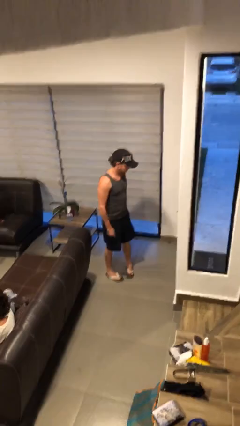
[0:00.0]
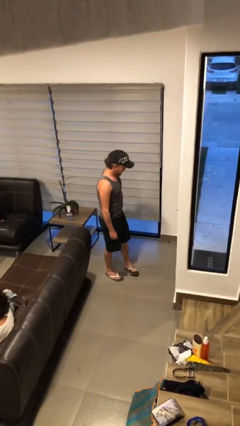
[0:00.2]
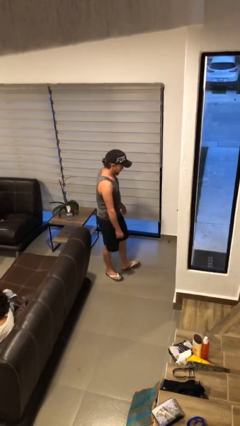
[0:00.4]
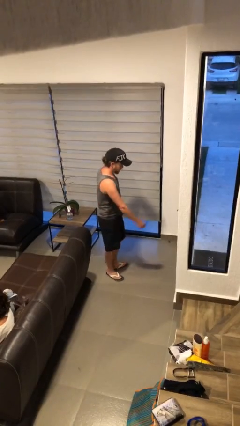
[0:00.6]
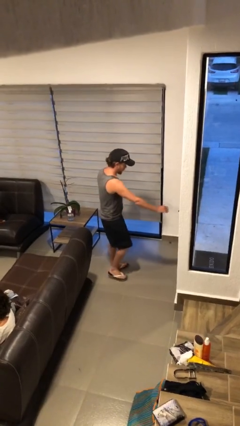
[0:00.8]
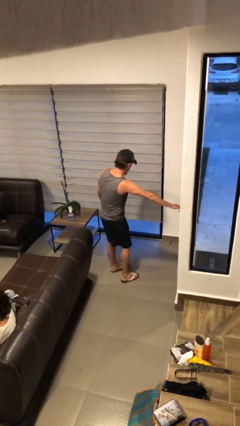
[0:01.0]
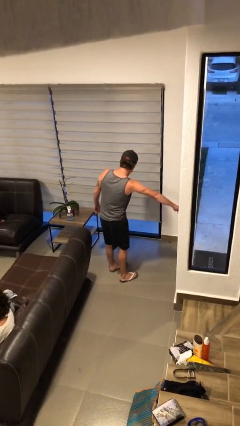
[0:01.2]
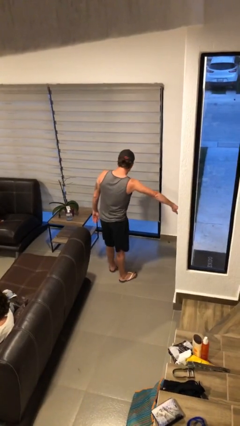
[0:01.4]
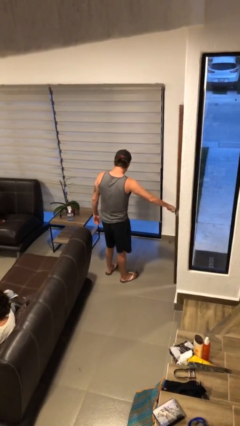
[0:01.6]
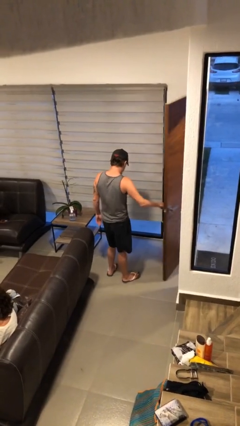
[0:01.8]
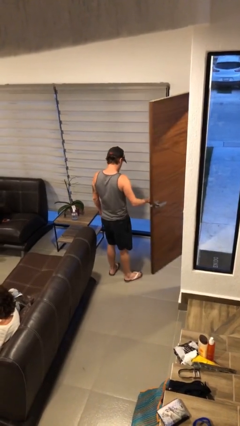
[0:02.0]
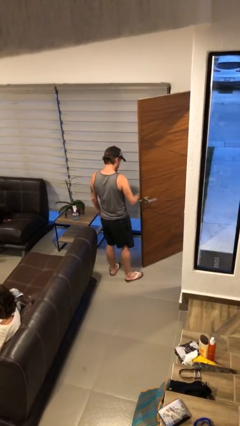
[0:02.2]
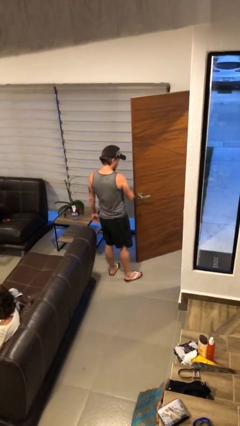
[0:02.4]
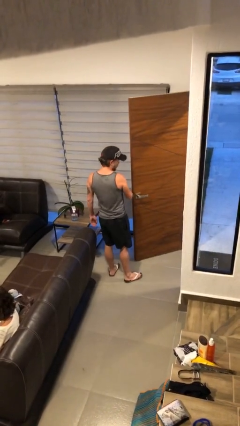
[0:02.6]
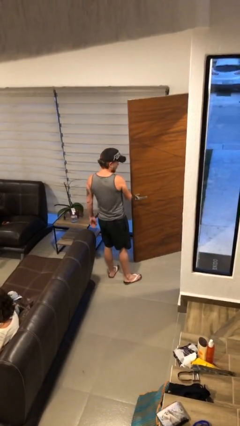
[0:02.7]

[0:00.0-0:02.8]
person opens facility door

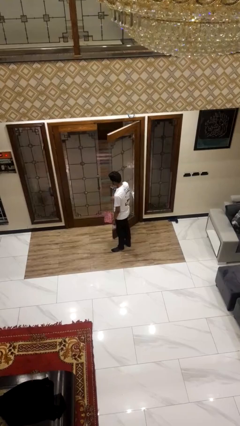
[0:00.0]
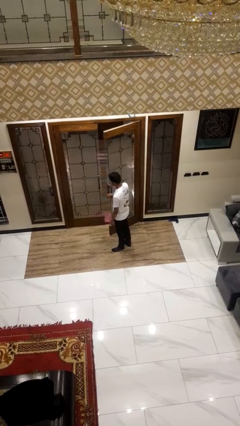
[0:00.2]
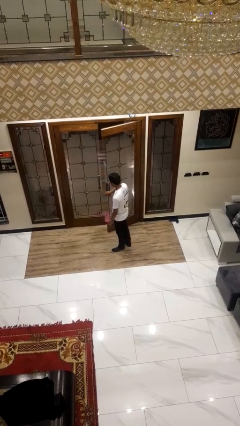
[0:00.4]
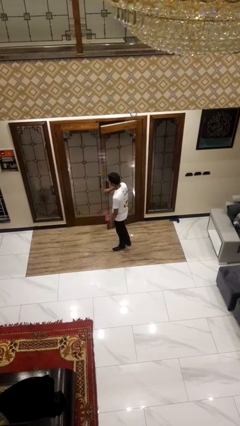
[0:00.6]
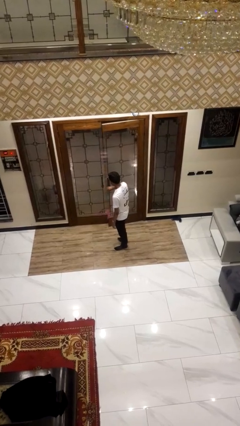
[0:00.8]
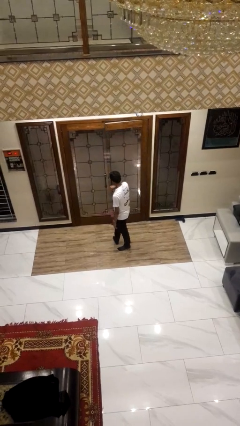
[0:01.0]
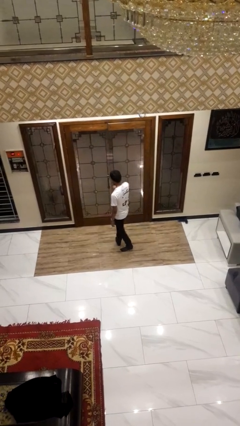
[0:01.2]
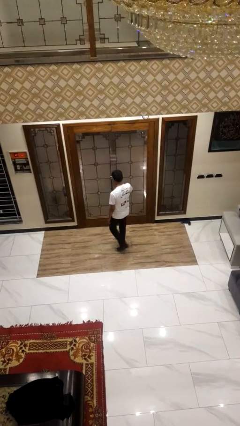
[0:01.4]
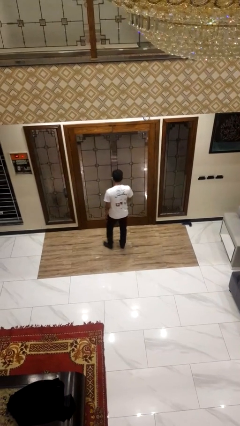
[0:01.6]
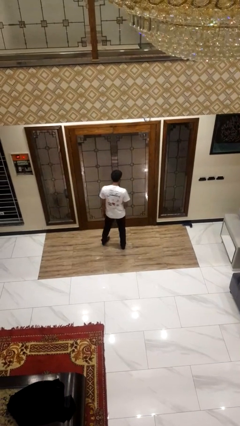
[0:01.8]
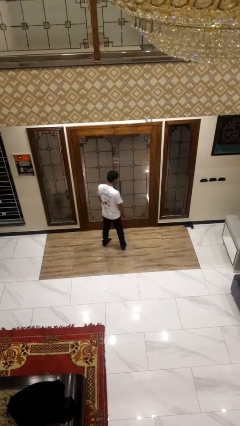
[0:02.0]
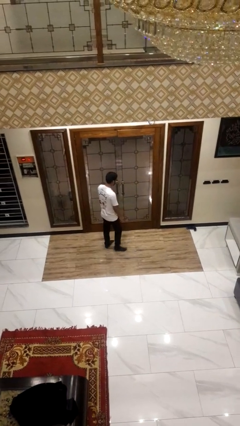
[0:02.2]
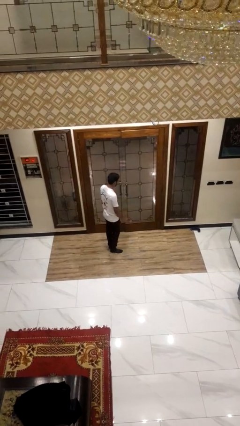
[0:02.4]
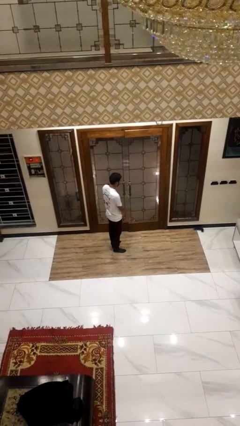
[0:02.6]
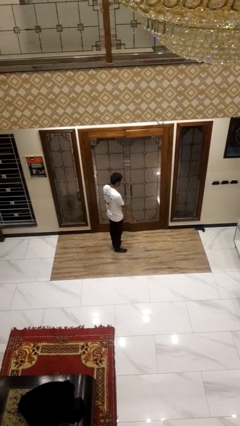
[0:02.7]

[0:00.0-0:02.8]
person closes facility door

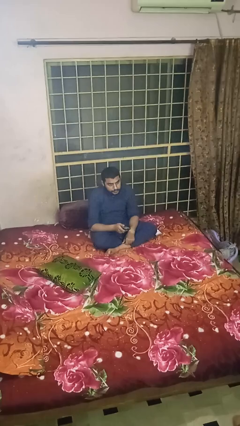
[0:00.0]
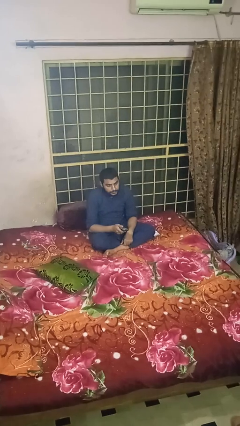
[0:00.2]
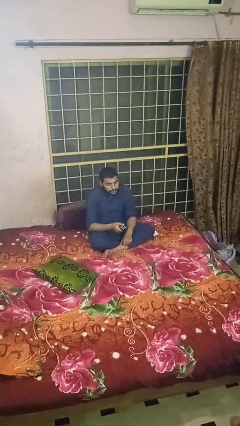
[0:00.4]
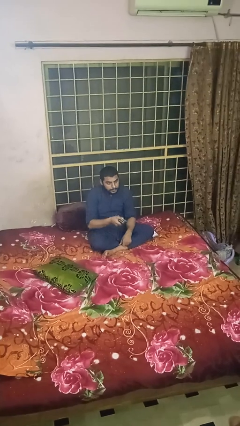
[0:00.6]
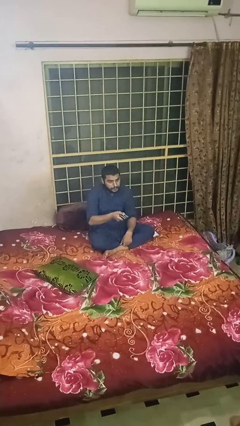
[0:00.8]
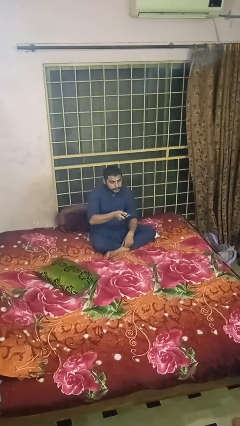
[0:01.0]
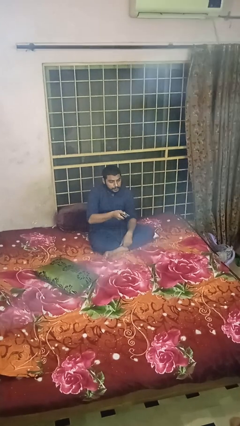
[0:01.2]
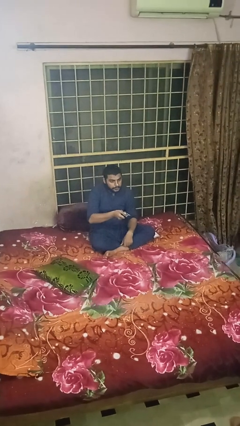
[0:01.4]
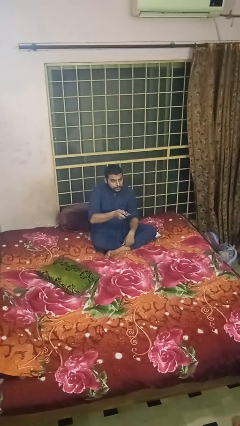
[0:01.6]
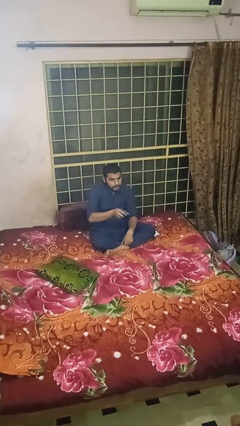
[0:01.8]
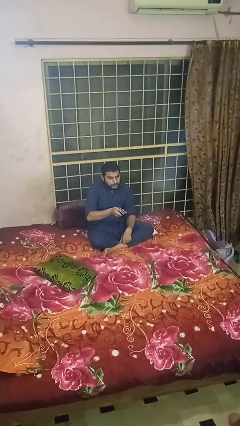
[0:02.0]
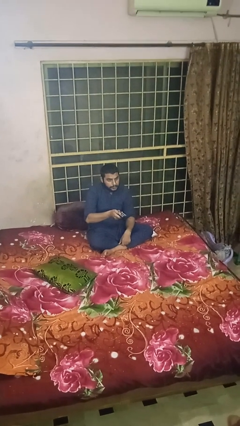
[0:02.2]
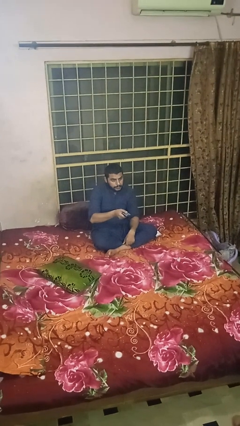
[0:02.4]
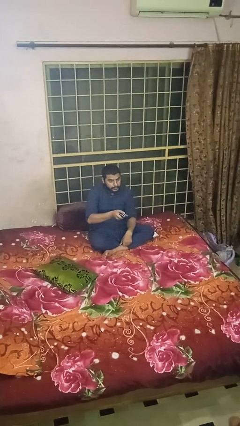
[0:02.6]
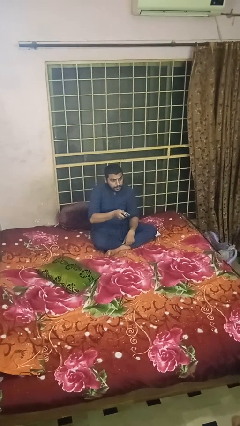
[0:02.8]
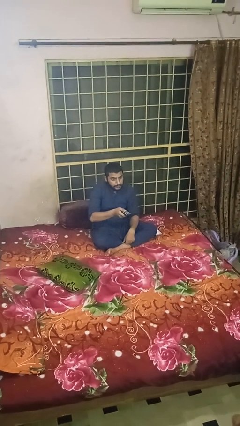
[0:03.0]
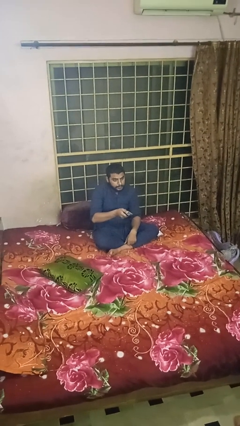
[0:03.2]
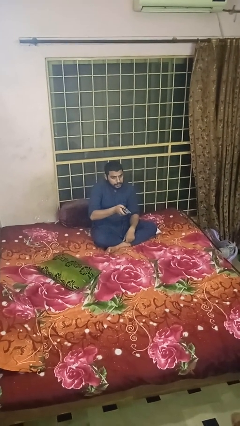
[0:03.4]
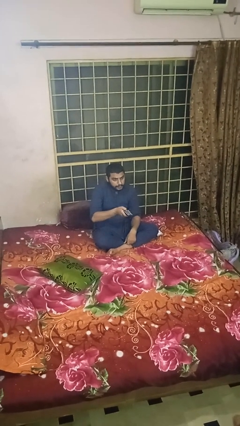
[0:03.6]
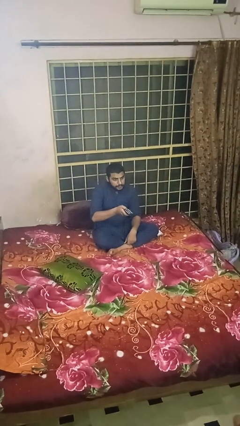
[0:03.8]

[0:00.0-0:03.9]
person uses television remote

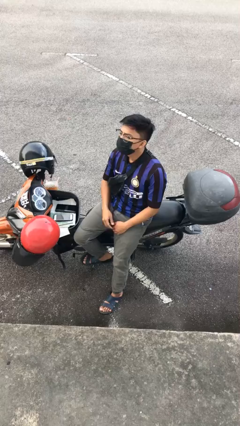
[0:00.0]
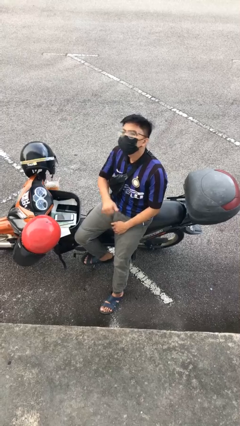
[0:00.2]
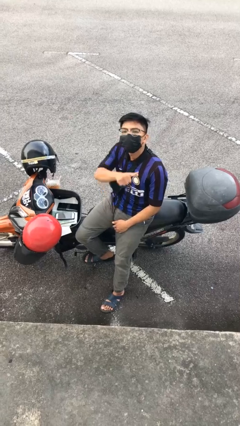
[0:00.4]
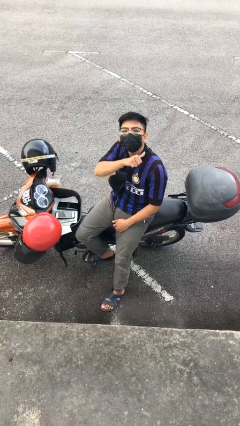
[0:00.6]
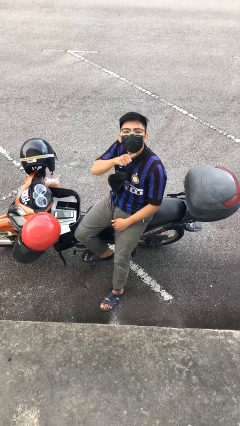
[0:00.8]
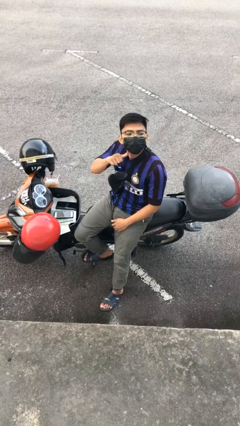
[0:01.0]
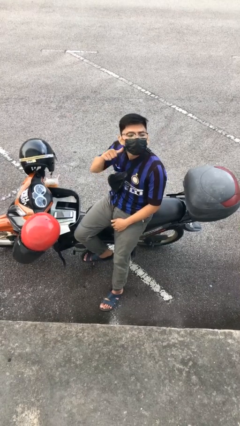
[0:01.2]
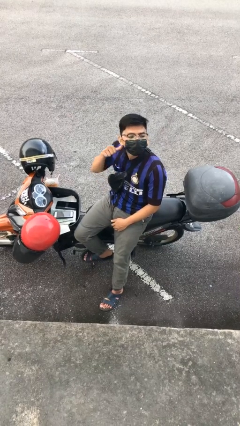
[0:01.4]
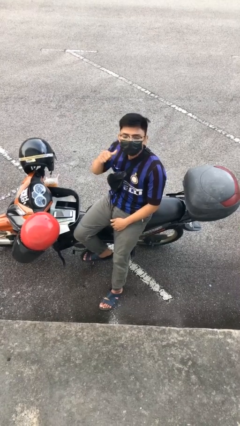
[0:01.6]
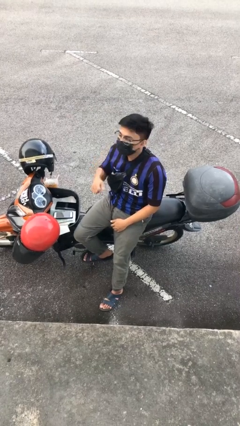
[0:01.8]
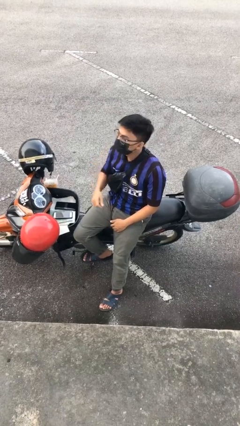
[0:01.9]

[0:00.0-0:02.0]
person gestures cut

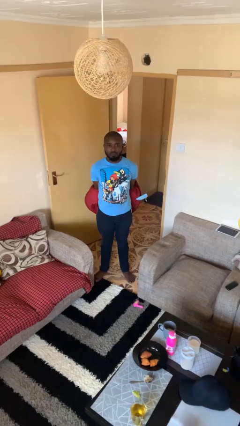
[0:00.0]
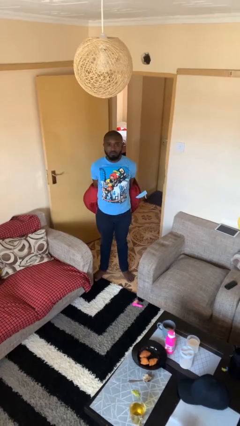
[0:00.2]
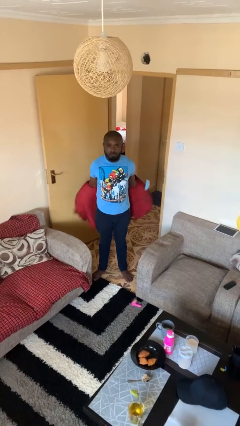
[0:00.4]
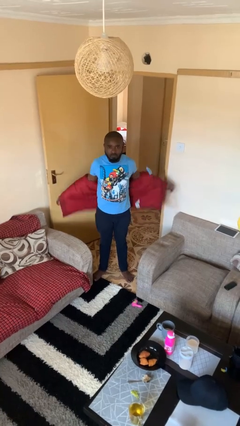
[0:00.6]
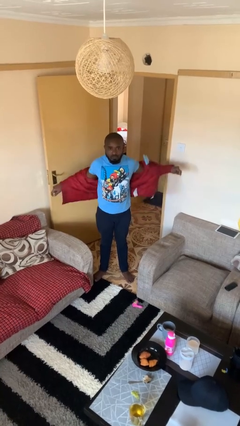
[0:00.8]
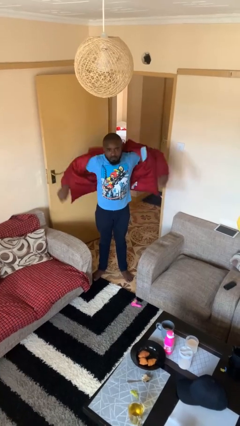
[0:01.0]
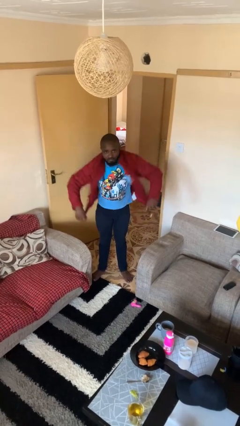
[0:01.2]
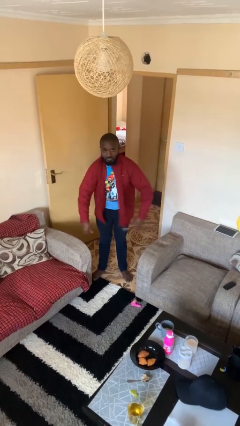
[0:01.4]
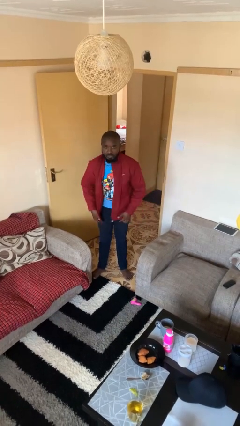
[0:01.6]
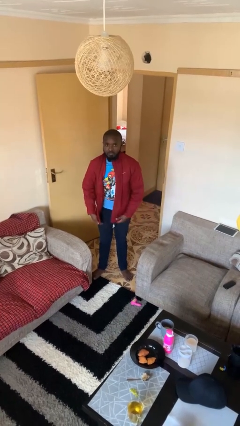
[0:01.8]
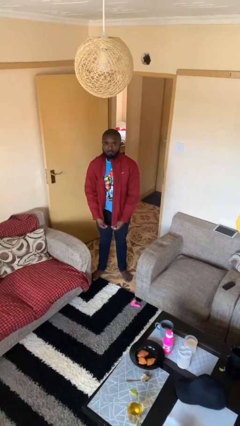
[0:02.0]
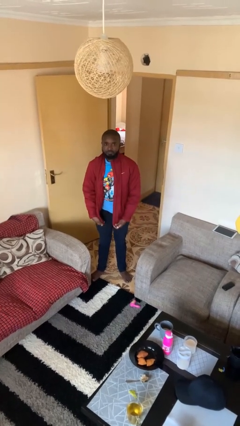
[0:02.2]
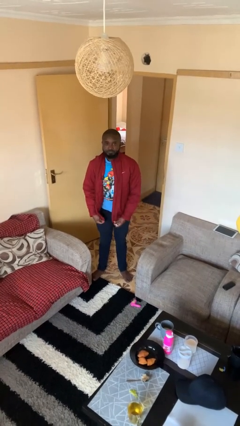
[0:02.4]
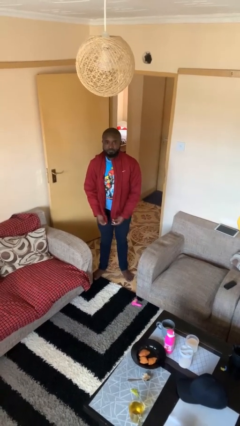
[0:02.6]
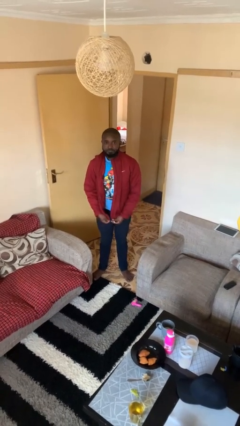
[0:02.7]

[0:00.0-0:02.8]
person puts on jacket

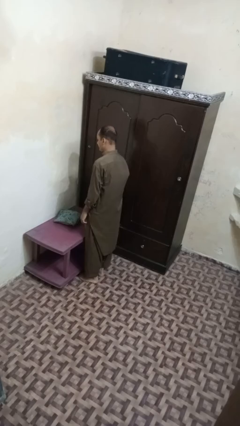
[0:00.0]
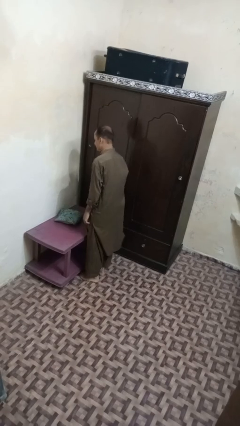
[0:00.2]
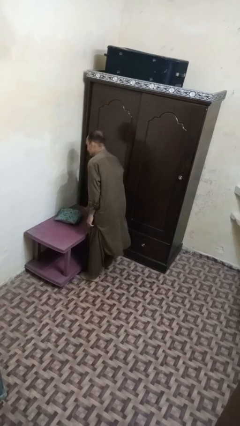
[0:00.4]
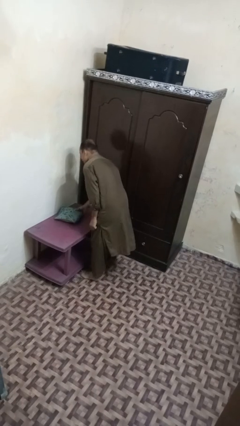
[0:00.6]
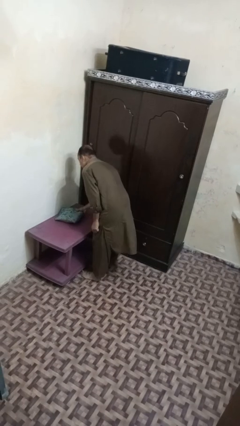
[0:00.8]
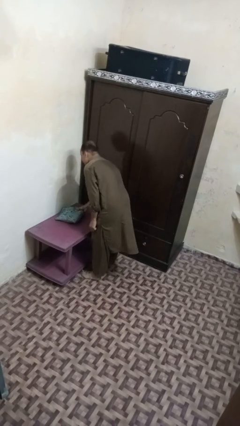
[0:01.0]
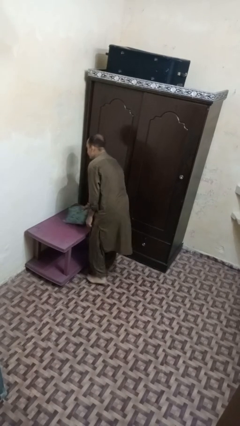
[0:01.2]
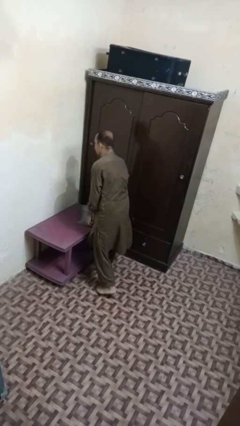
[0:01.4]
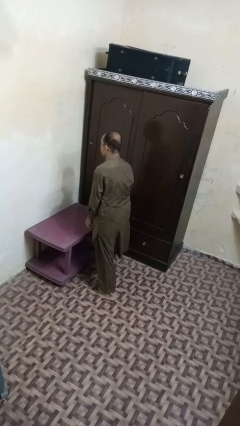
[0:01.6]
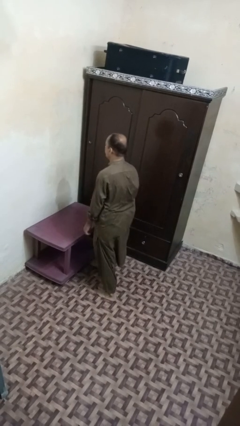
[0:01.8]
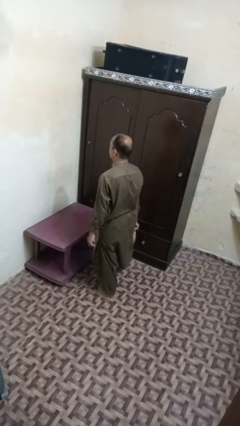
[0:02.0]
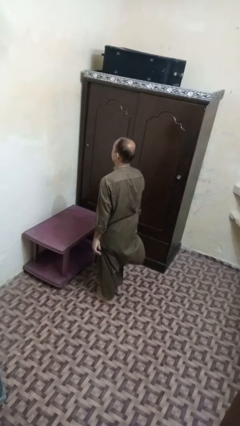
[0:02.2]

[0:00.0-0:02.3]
person picks up object from table

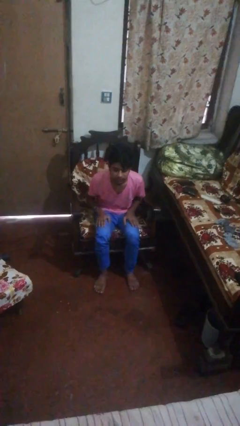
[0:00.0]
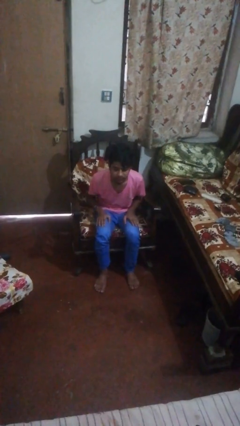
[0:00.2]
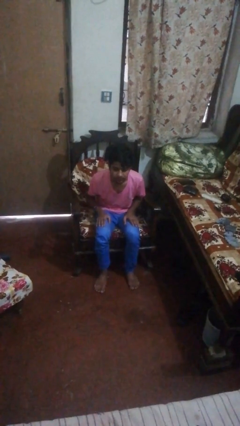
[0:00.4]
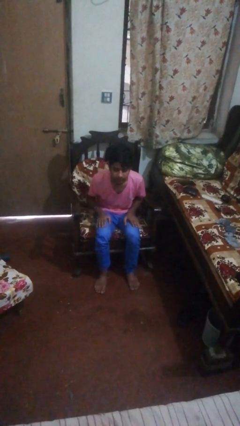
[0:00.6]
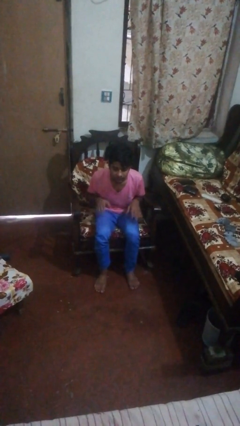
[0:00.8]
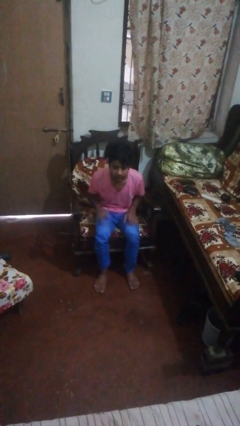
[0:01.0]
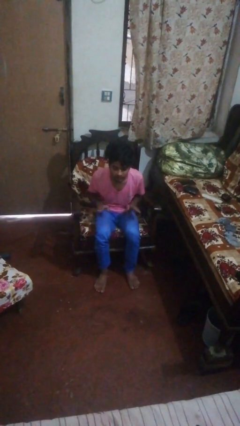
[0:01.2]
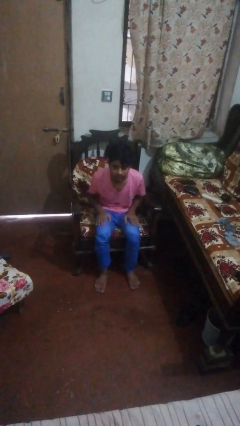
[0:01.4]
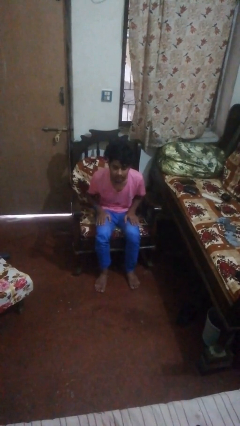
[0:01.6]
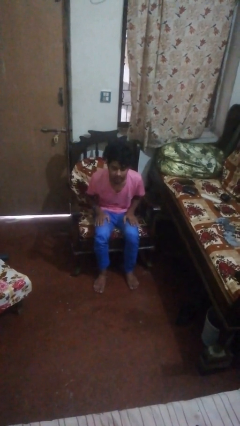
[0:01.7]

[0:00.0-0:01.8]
person slaps hands on thighs
